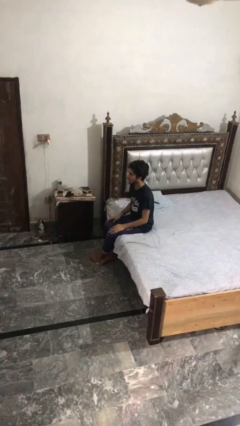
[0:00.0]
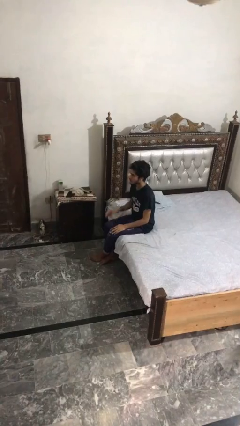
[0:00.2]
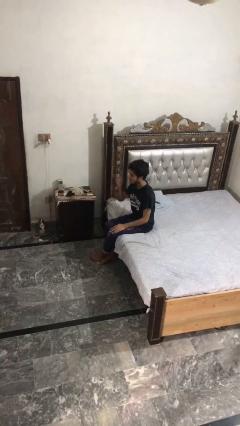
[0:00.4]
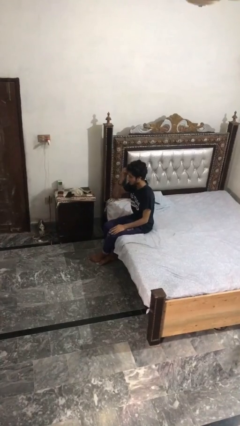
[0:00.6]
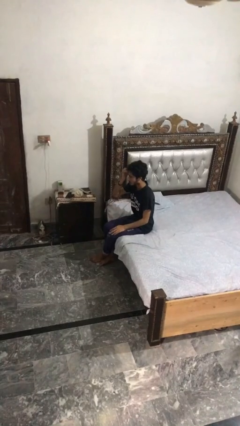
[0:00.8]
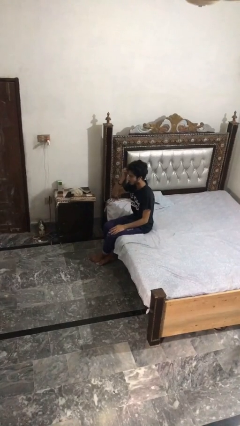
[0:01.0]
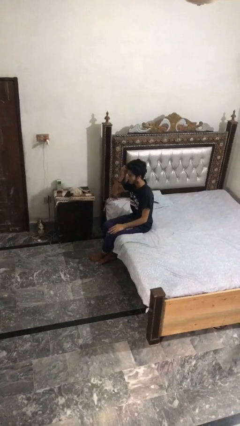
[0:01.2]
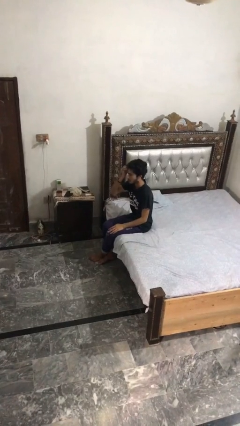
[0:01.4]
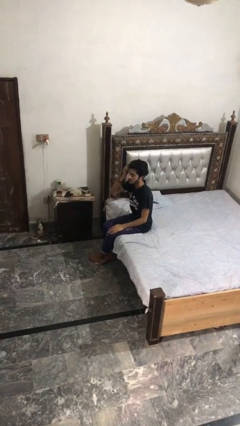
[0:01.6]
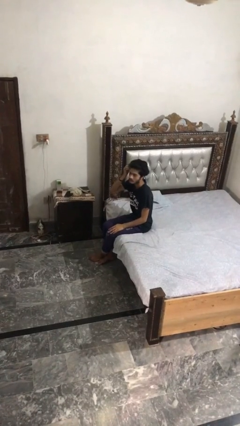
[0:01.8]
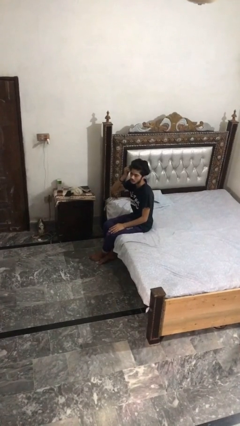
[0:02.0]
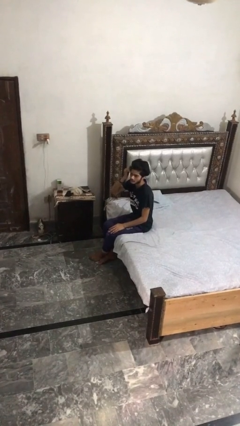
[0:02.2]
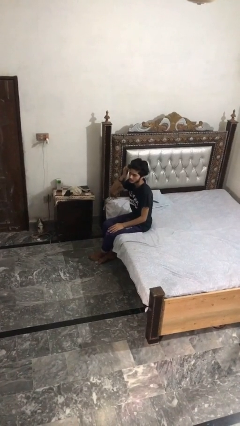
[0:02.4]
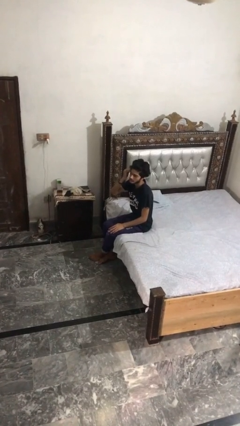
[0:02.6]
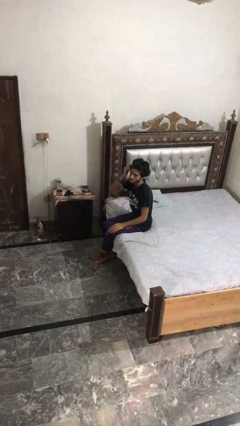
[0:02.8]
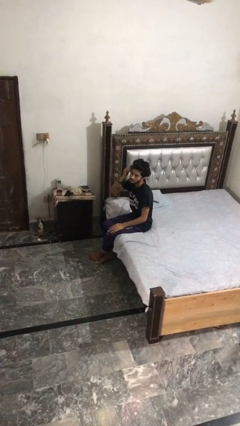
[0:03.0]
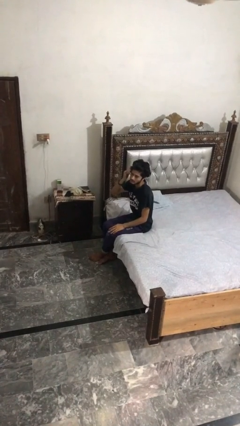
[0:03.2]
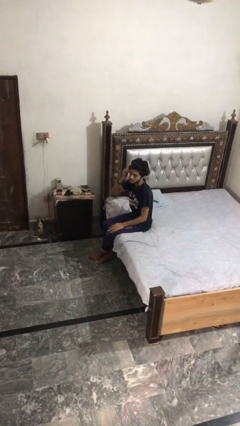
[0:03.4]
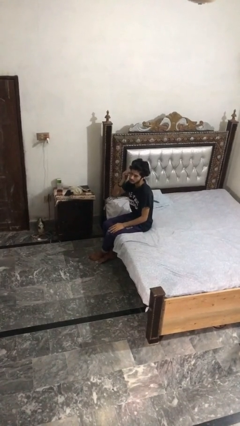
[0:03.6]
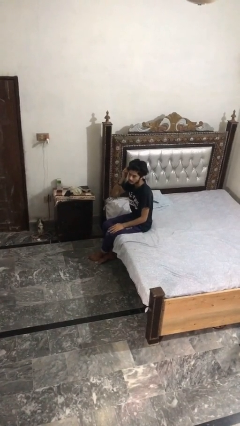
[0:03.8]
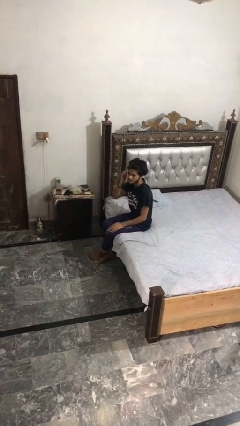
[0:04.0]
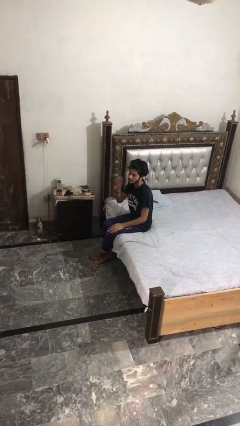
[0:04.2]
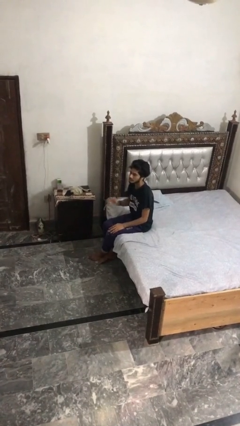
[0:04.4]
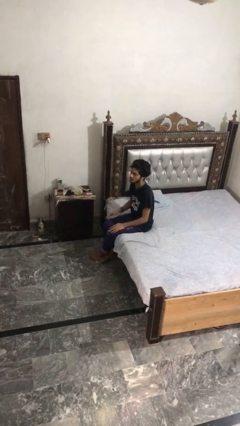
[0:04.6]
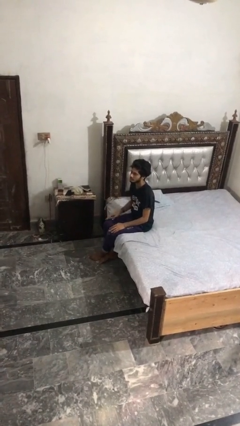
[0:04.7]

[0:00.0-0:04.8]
person scratches face

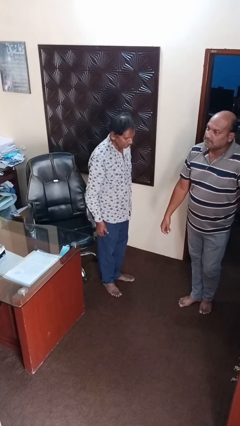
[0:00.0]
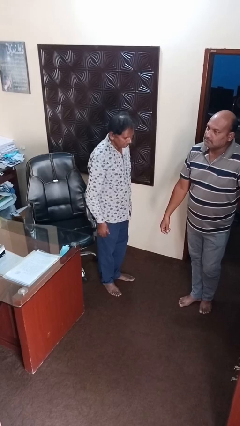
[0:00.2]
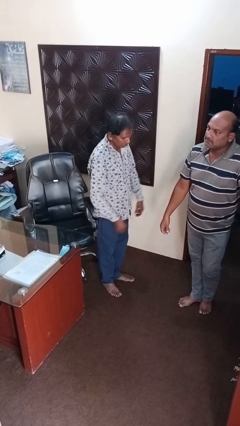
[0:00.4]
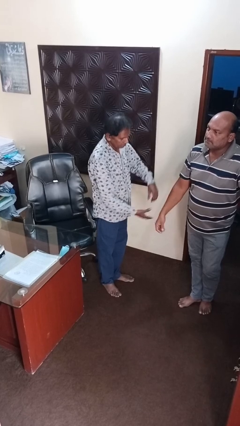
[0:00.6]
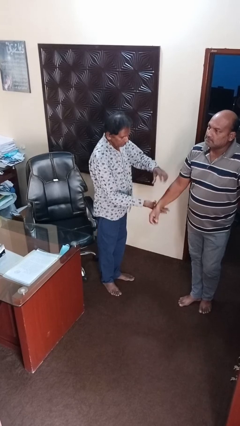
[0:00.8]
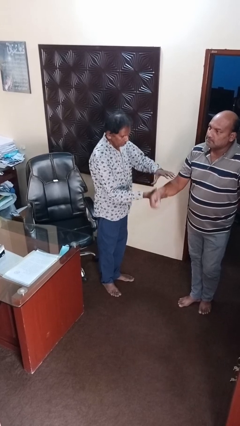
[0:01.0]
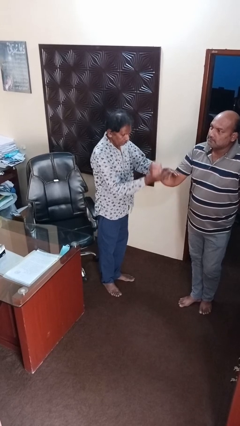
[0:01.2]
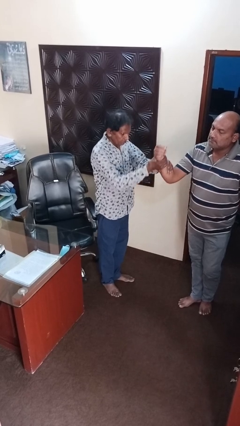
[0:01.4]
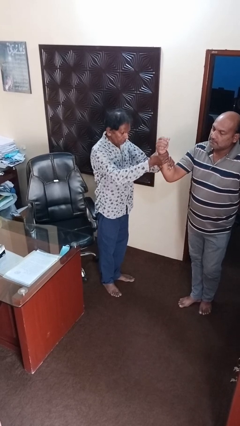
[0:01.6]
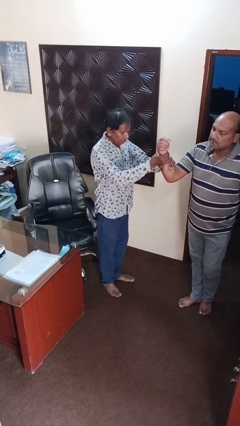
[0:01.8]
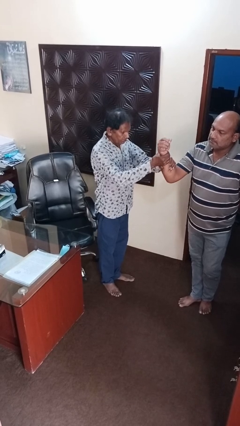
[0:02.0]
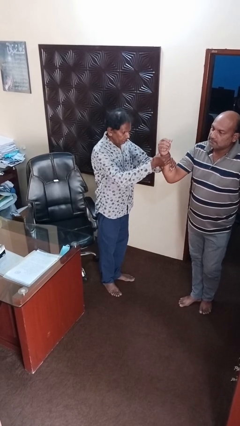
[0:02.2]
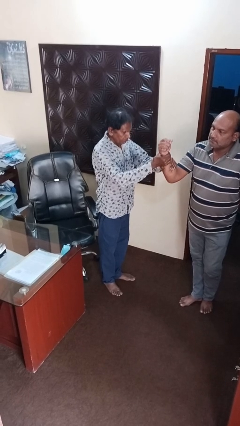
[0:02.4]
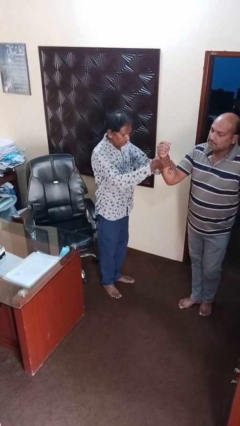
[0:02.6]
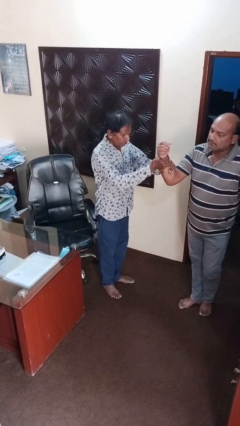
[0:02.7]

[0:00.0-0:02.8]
person grabs person by forearm

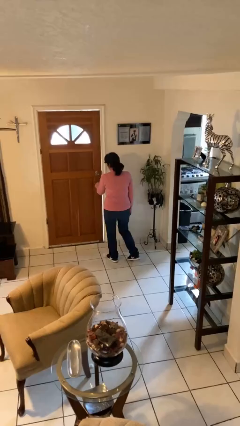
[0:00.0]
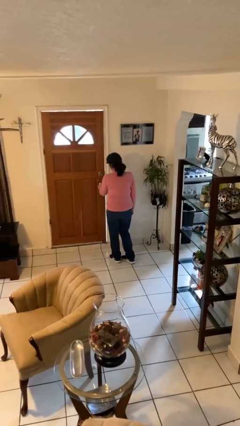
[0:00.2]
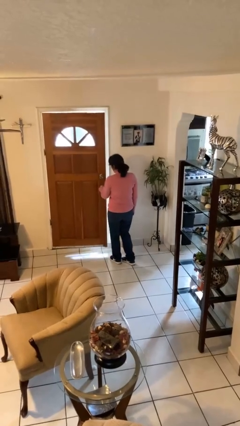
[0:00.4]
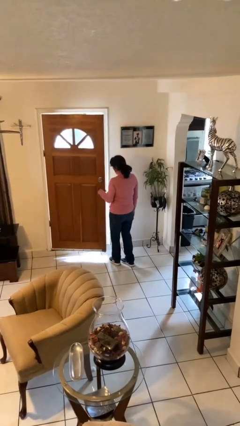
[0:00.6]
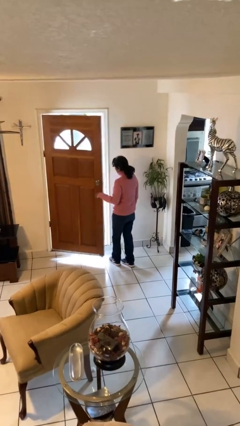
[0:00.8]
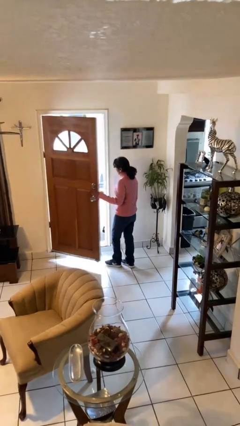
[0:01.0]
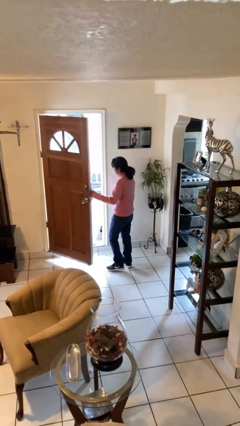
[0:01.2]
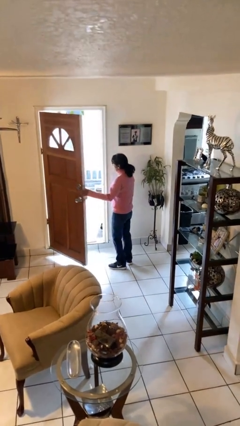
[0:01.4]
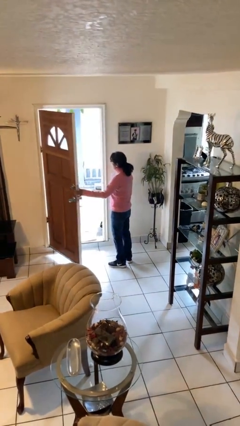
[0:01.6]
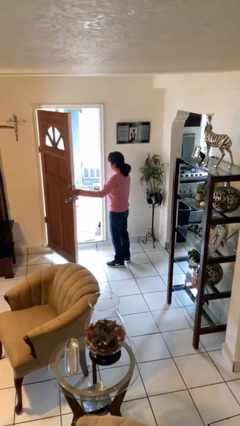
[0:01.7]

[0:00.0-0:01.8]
person opens facility door

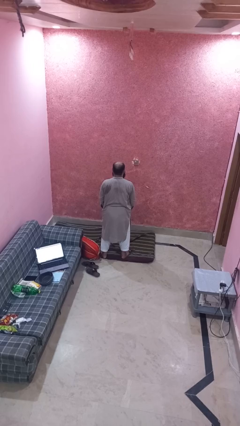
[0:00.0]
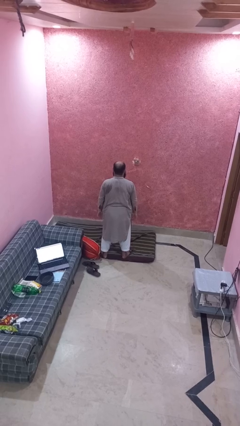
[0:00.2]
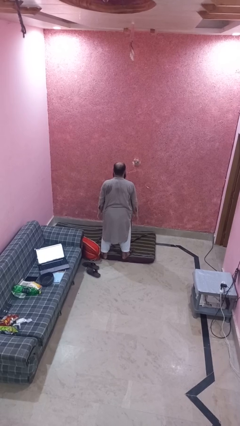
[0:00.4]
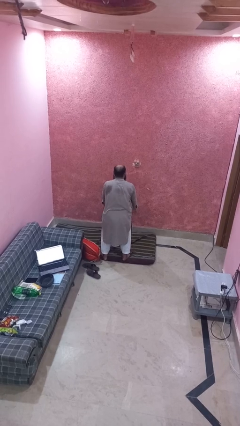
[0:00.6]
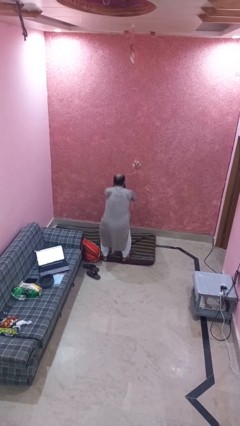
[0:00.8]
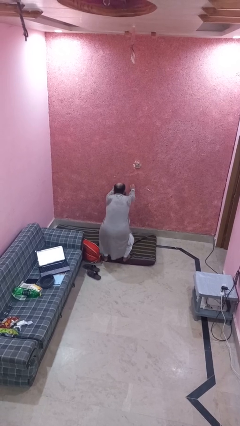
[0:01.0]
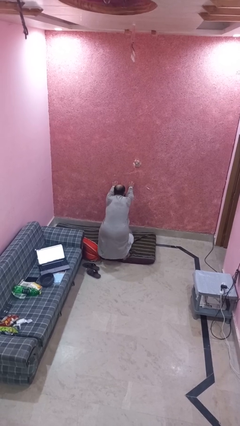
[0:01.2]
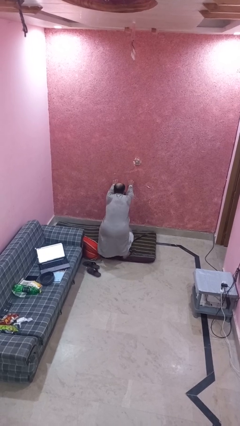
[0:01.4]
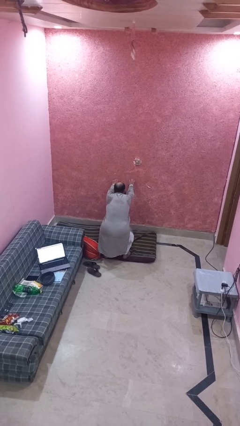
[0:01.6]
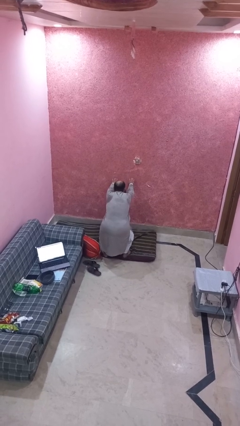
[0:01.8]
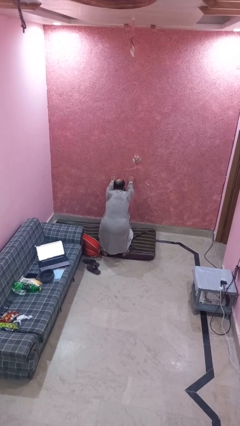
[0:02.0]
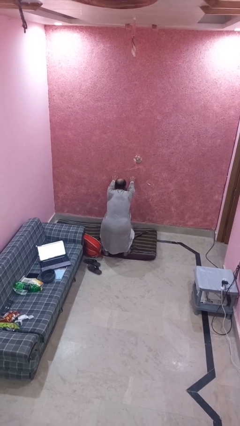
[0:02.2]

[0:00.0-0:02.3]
person squats

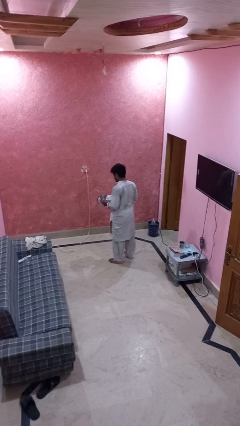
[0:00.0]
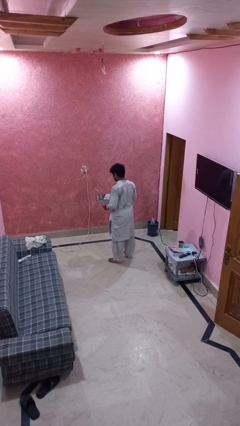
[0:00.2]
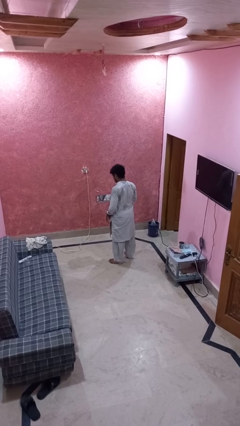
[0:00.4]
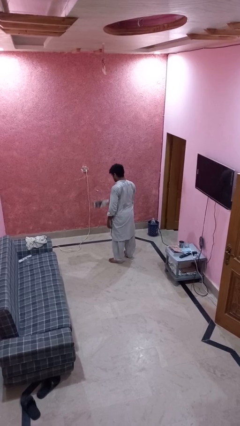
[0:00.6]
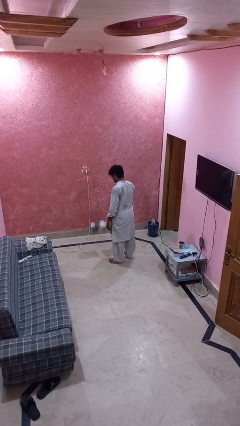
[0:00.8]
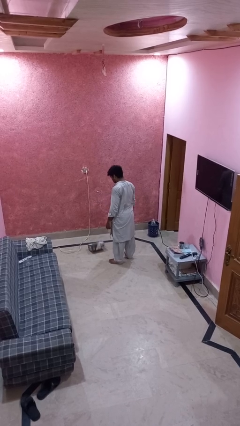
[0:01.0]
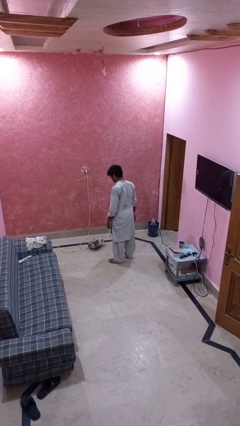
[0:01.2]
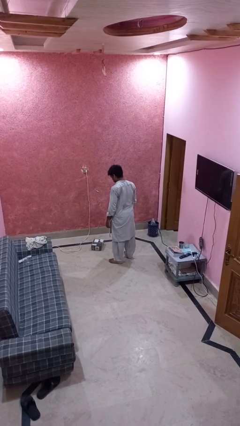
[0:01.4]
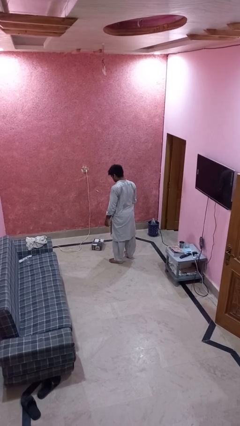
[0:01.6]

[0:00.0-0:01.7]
person throws object to ground

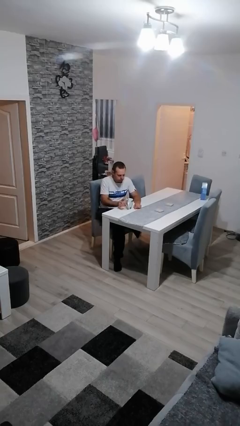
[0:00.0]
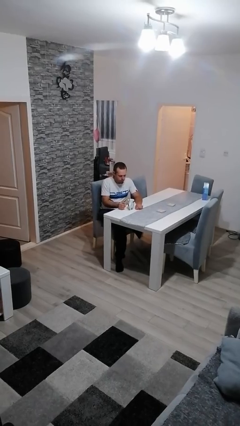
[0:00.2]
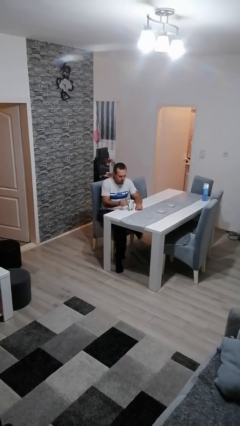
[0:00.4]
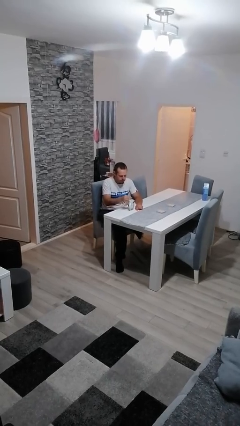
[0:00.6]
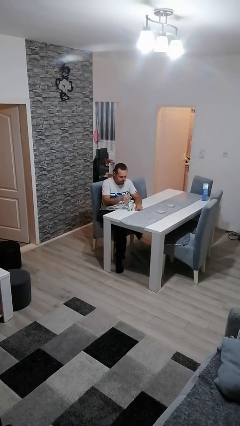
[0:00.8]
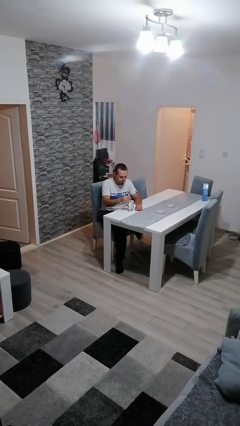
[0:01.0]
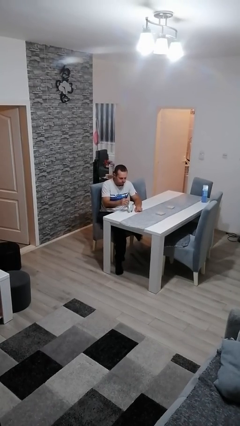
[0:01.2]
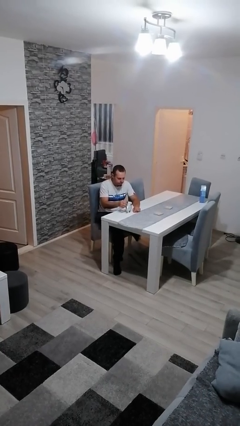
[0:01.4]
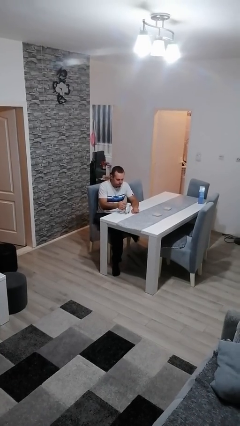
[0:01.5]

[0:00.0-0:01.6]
person stirs mug

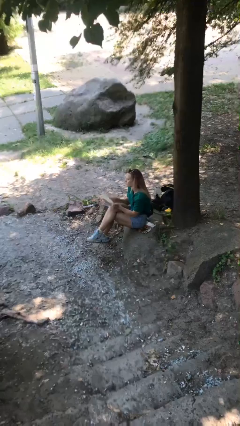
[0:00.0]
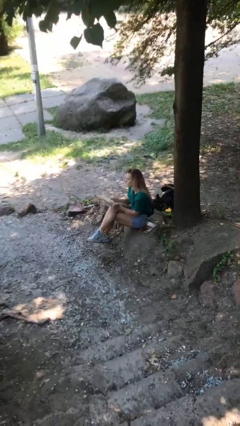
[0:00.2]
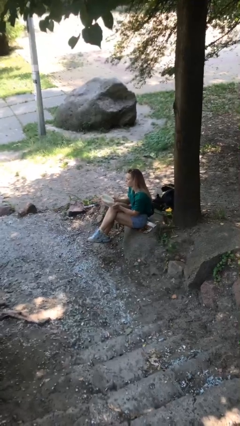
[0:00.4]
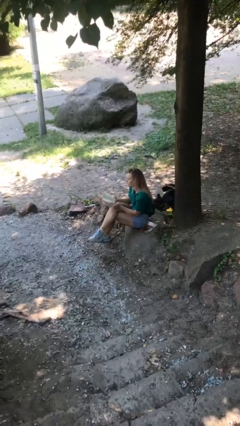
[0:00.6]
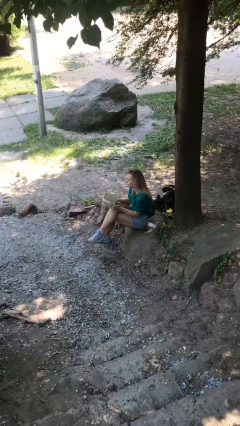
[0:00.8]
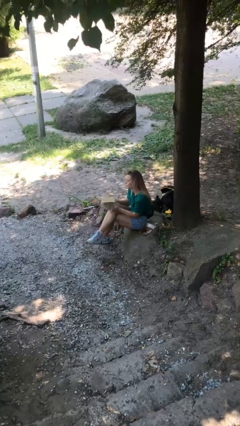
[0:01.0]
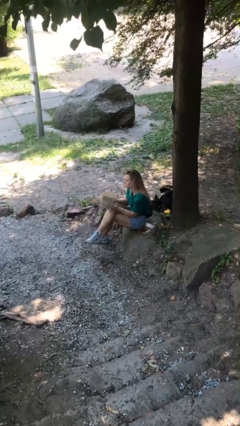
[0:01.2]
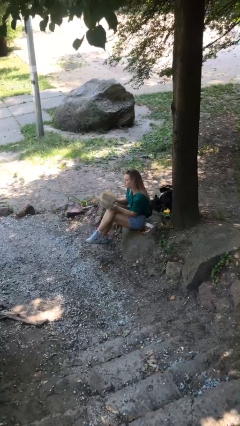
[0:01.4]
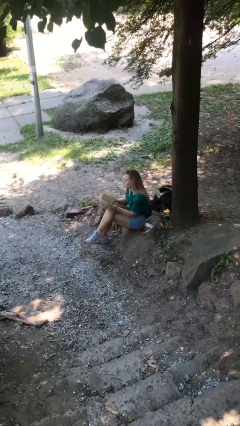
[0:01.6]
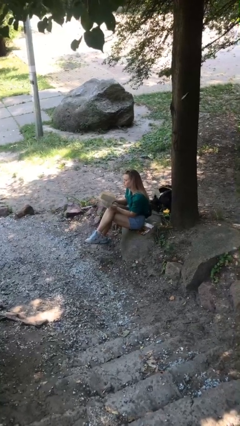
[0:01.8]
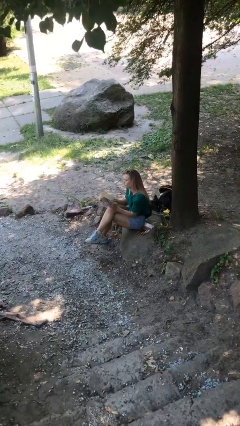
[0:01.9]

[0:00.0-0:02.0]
person reads book

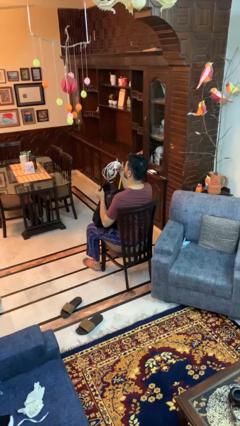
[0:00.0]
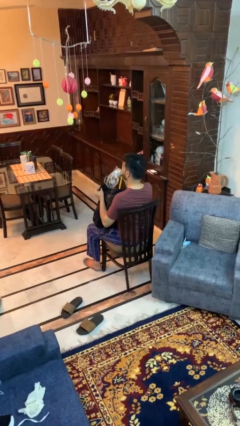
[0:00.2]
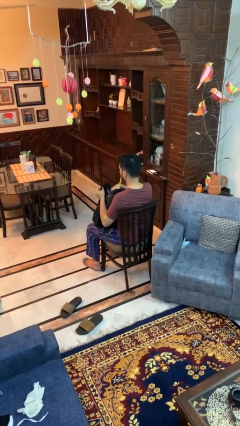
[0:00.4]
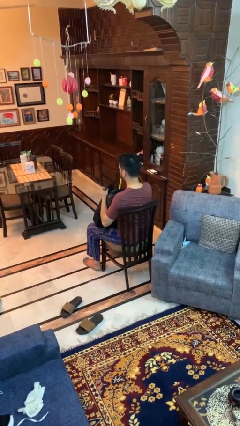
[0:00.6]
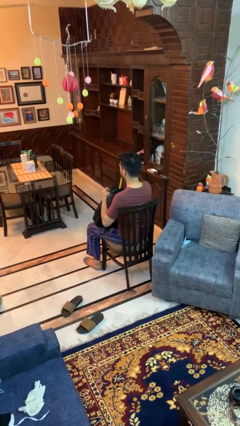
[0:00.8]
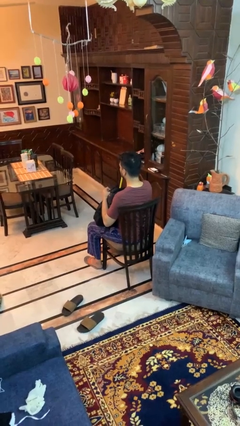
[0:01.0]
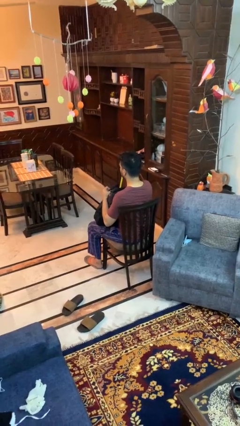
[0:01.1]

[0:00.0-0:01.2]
person puts object into backpack
